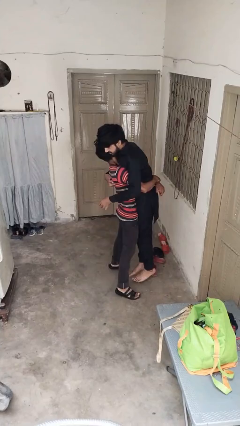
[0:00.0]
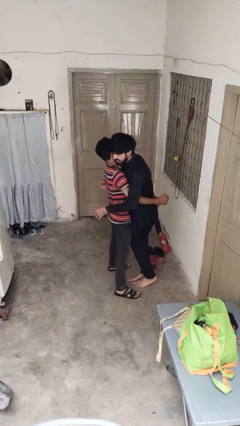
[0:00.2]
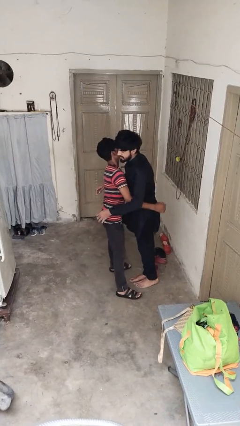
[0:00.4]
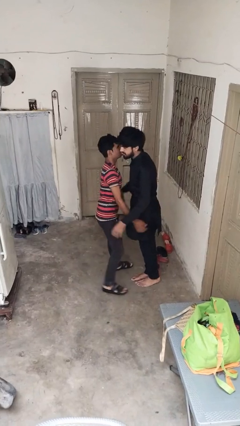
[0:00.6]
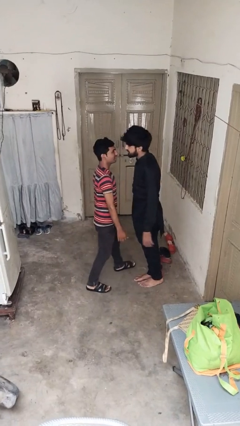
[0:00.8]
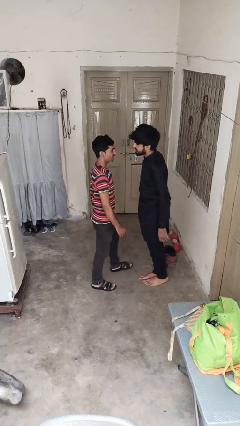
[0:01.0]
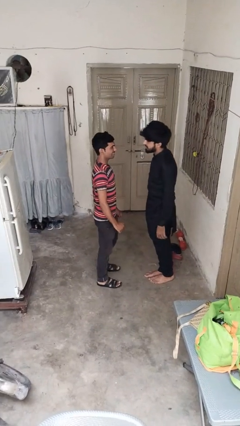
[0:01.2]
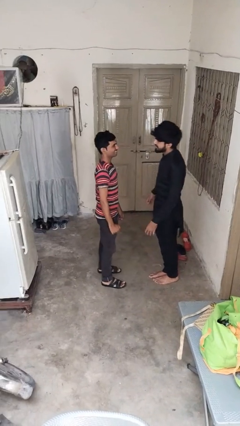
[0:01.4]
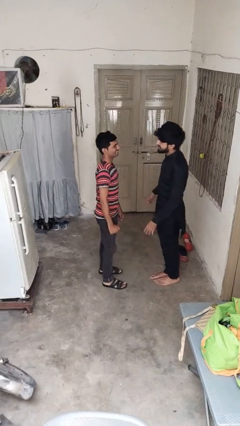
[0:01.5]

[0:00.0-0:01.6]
person puts down person

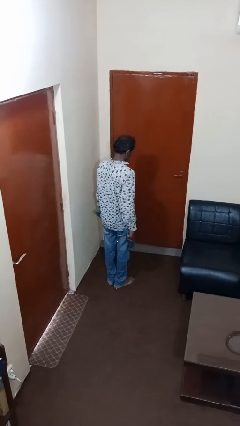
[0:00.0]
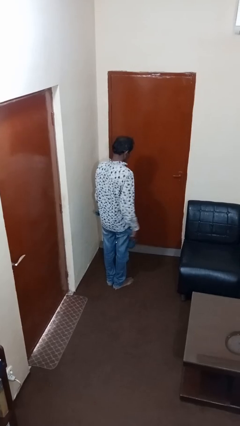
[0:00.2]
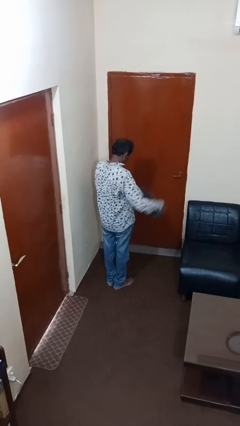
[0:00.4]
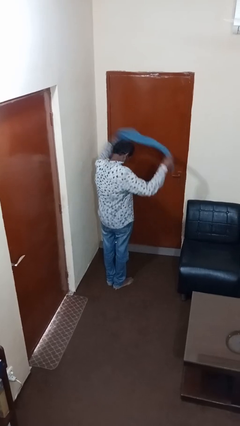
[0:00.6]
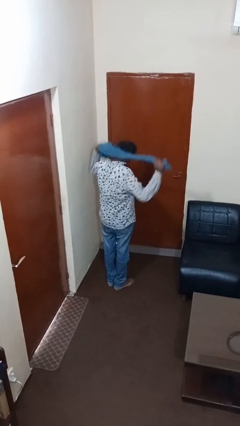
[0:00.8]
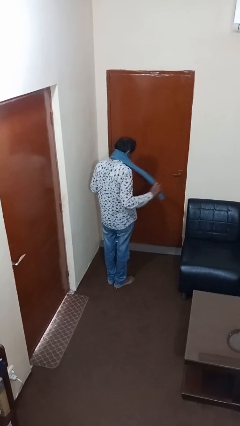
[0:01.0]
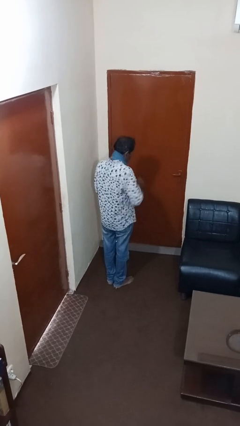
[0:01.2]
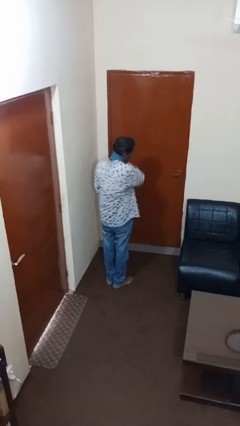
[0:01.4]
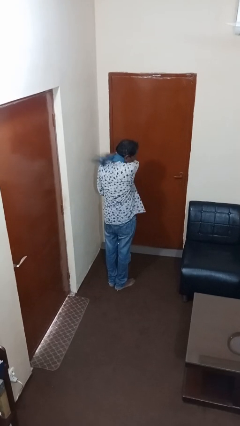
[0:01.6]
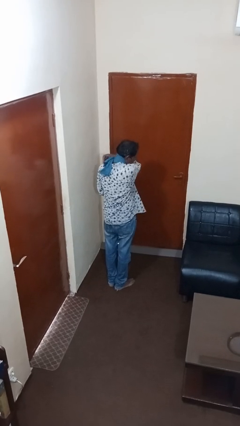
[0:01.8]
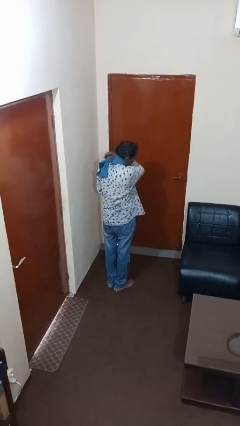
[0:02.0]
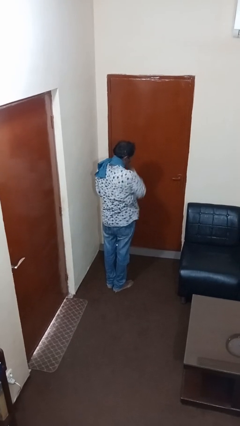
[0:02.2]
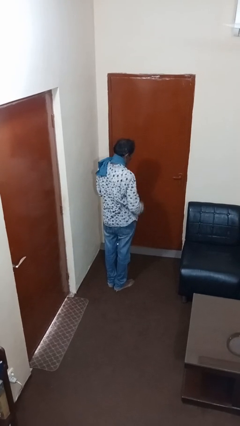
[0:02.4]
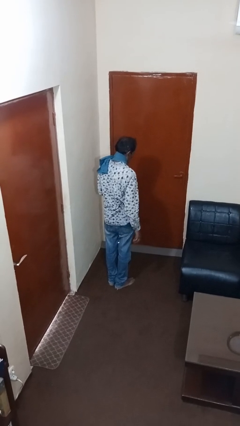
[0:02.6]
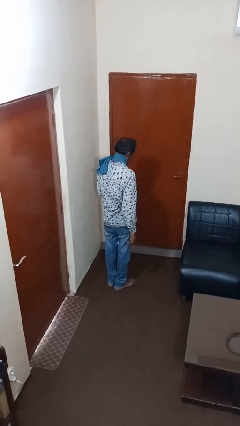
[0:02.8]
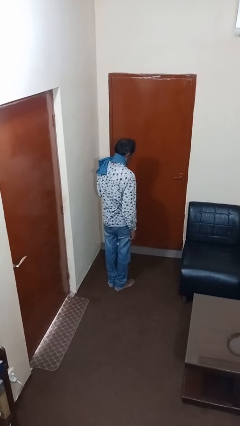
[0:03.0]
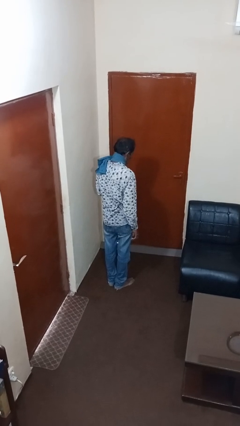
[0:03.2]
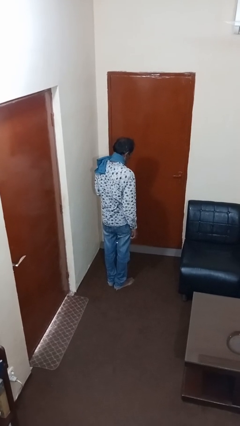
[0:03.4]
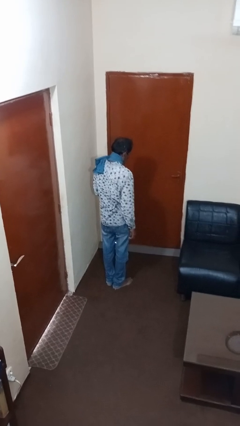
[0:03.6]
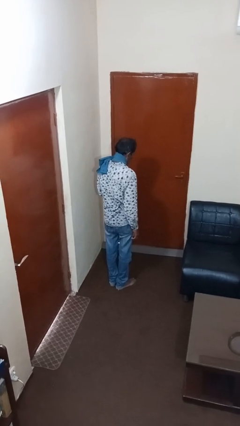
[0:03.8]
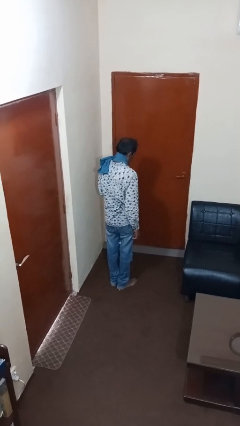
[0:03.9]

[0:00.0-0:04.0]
person puts on scarf

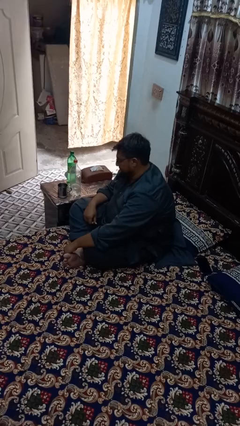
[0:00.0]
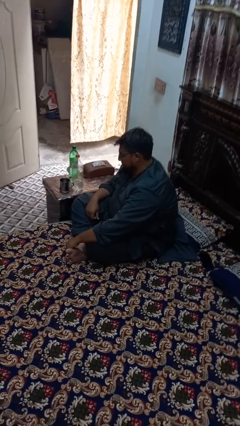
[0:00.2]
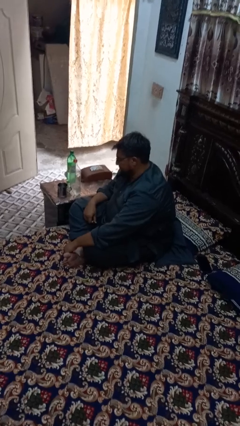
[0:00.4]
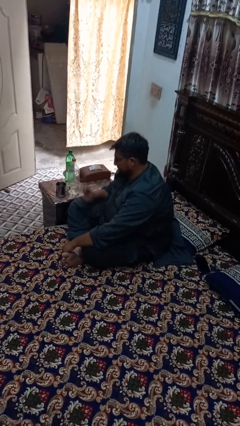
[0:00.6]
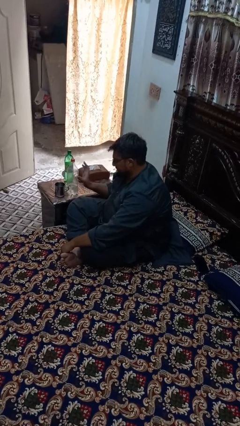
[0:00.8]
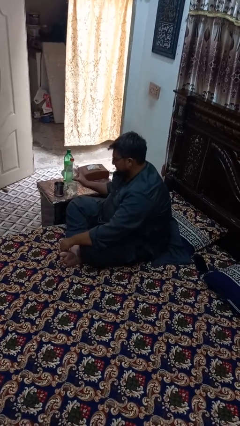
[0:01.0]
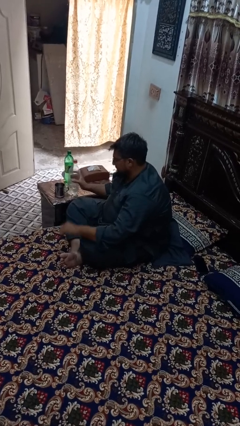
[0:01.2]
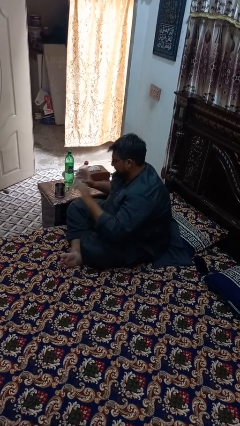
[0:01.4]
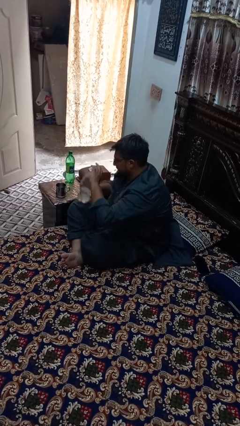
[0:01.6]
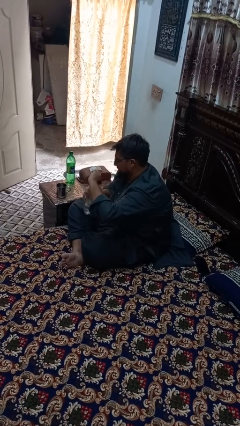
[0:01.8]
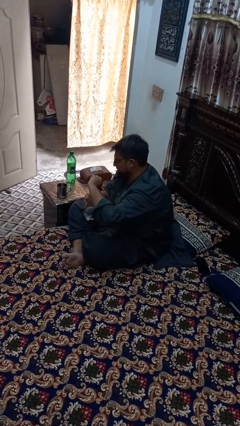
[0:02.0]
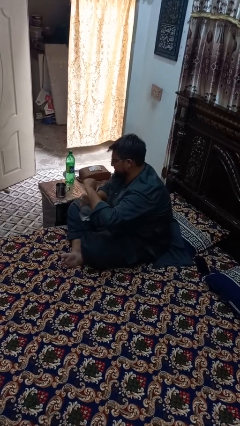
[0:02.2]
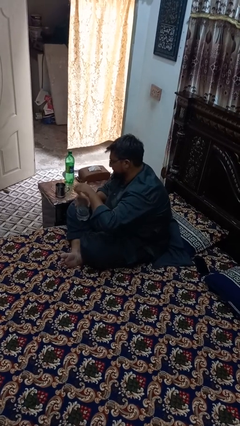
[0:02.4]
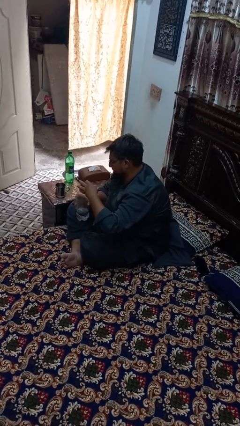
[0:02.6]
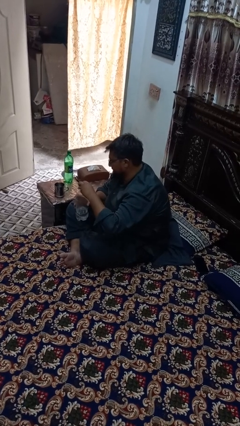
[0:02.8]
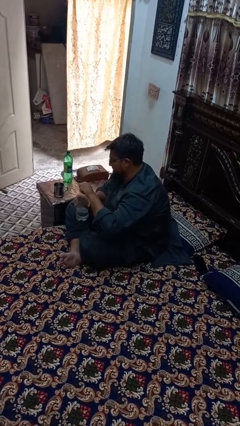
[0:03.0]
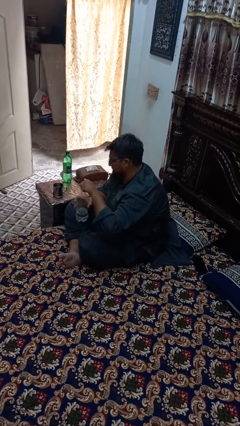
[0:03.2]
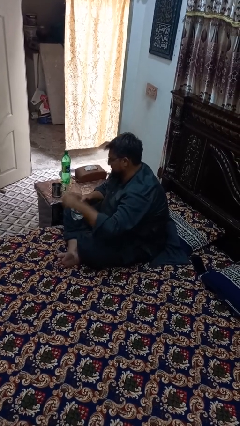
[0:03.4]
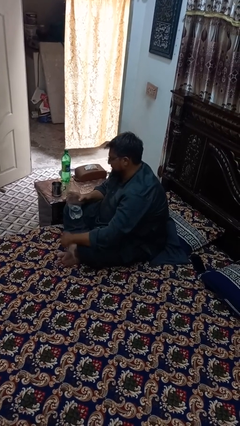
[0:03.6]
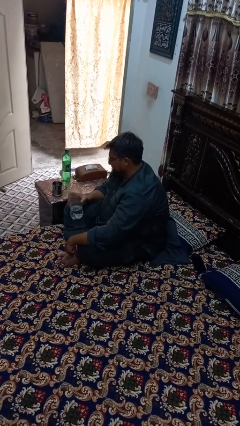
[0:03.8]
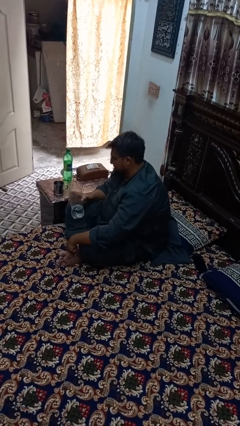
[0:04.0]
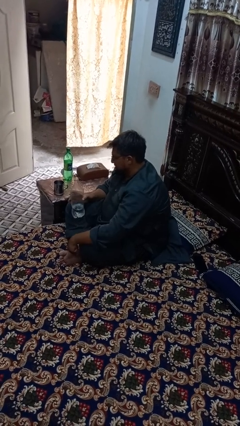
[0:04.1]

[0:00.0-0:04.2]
person unscrews lid from bottle

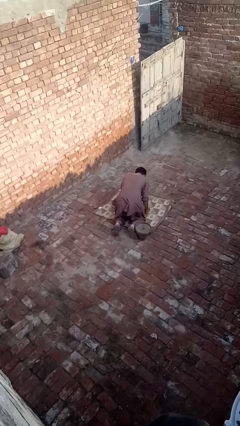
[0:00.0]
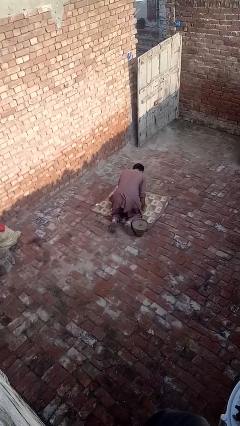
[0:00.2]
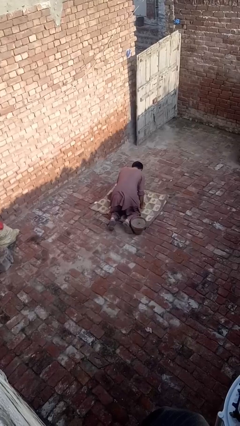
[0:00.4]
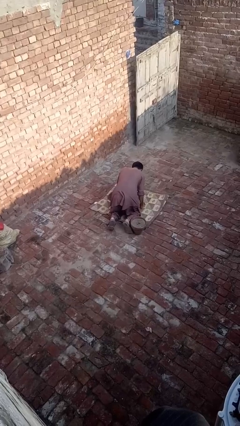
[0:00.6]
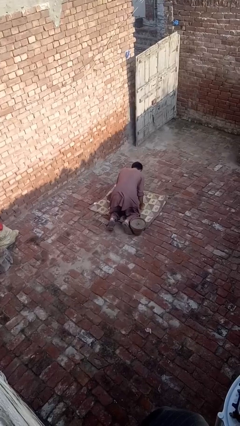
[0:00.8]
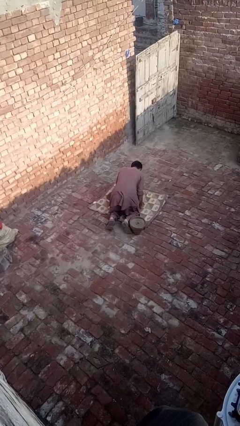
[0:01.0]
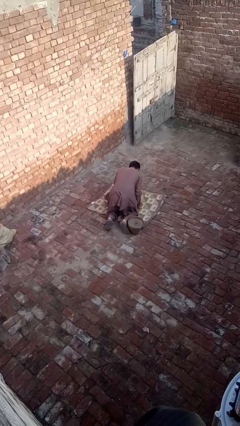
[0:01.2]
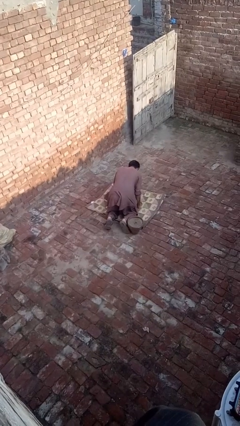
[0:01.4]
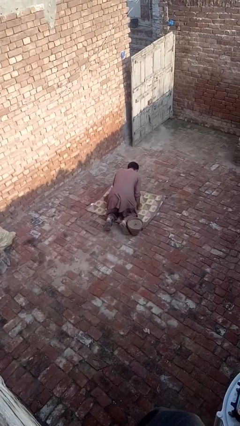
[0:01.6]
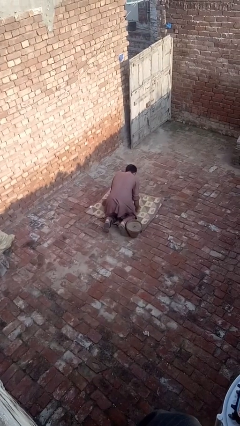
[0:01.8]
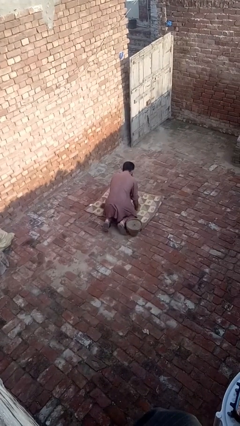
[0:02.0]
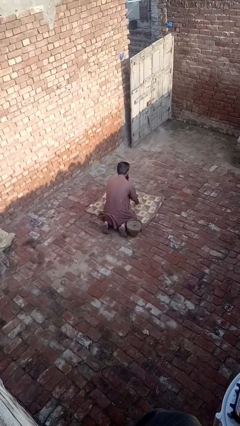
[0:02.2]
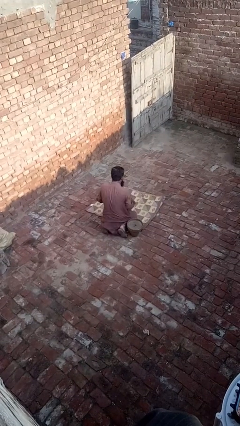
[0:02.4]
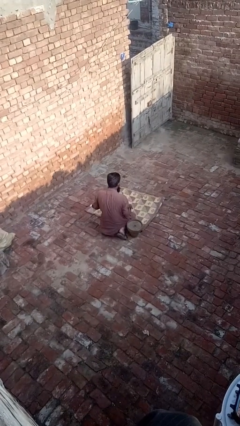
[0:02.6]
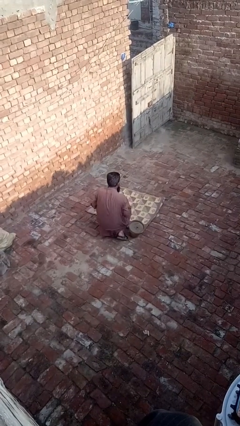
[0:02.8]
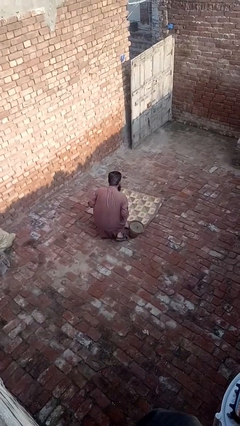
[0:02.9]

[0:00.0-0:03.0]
person lies down on floor

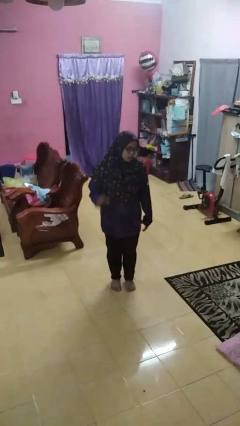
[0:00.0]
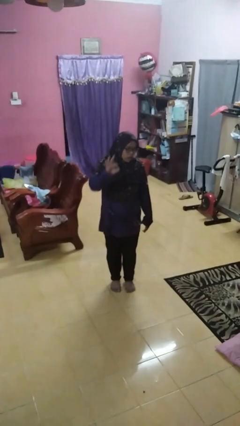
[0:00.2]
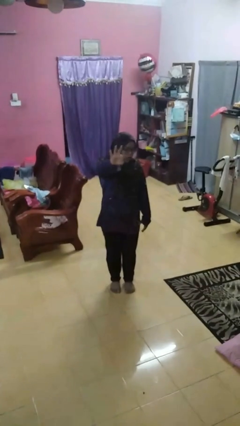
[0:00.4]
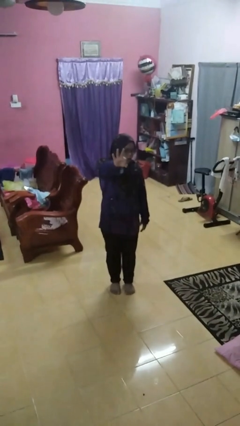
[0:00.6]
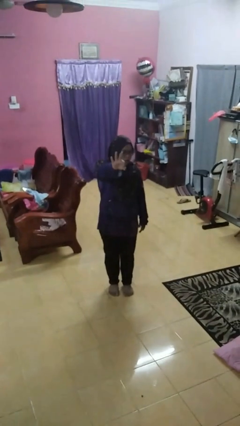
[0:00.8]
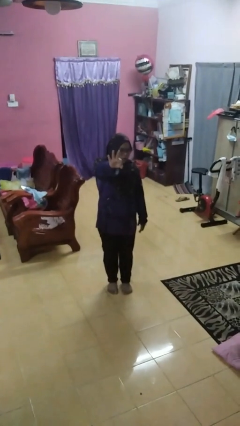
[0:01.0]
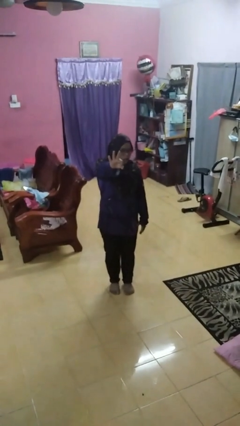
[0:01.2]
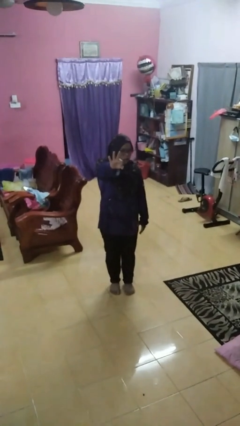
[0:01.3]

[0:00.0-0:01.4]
person gestures number three

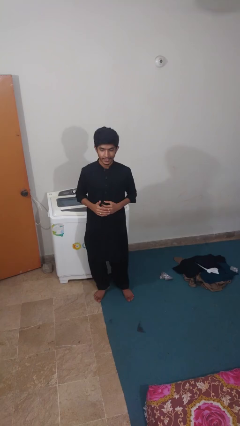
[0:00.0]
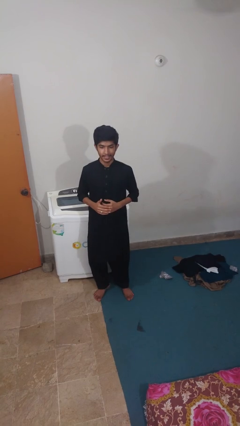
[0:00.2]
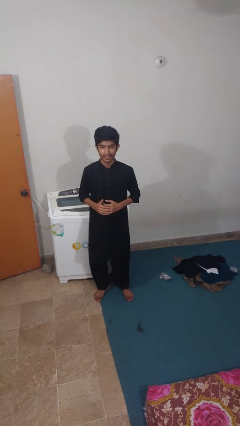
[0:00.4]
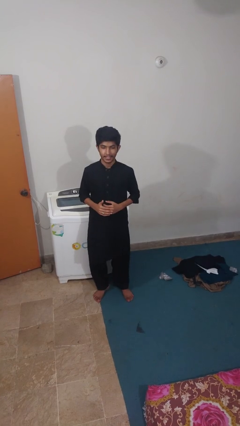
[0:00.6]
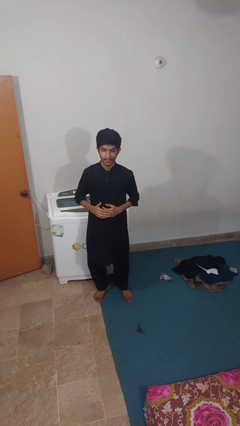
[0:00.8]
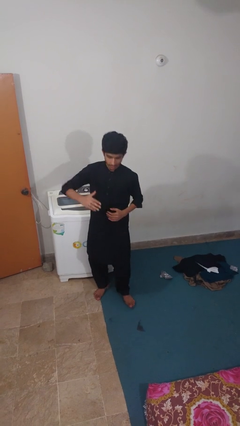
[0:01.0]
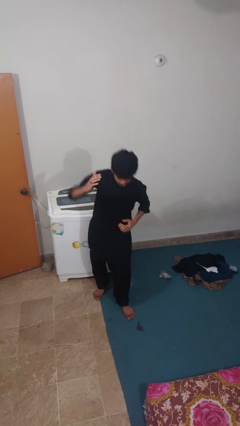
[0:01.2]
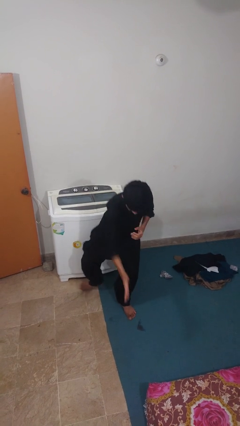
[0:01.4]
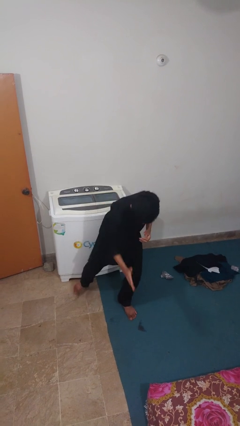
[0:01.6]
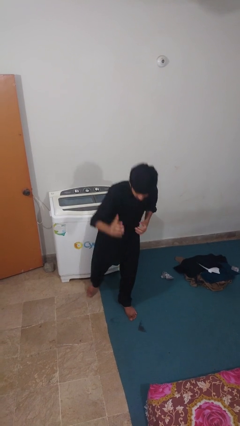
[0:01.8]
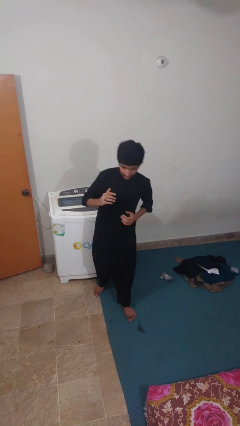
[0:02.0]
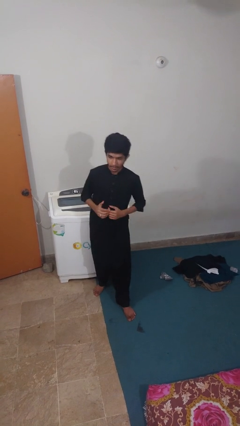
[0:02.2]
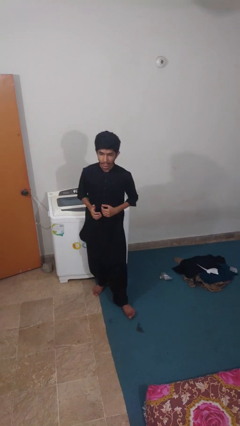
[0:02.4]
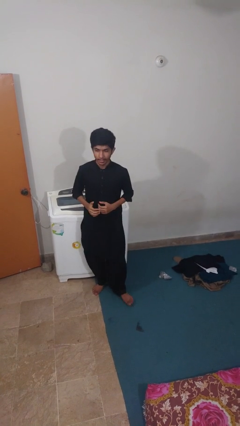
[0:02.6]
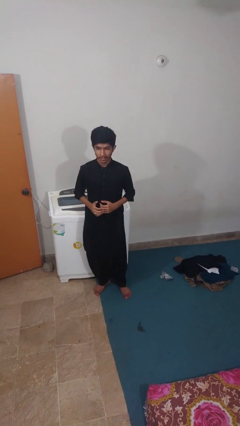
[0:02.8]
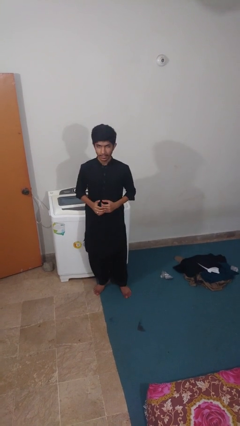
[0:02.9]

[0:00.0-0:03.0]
person karate chop
